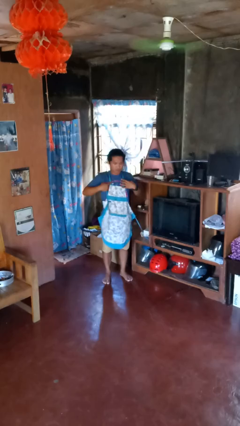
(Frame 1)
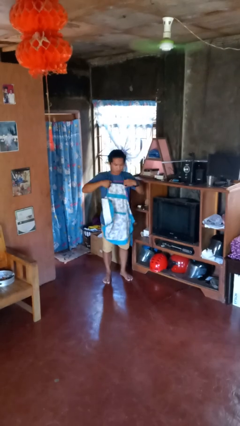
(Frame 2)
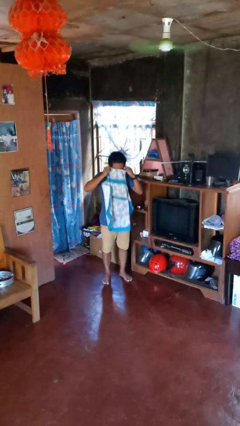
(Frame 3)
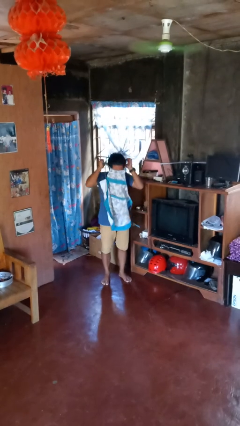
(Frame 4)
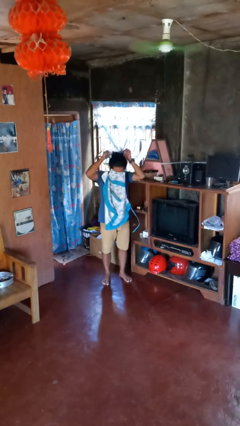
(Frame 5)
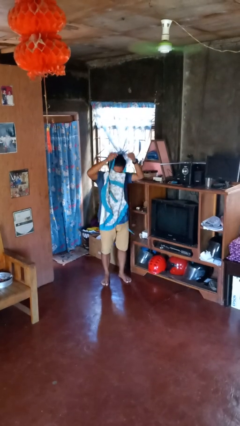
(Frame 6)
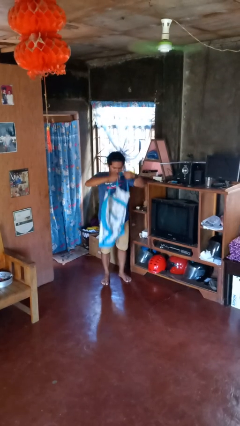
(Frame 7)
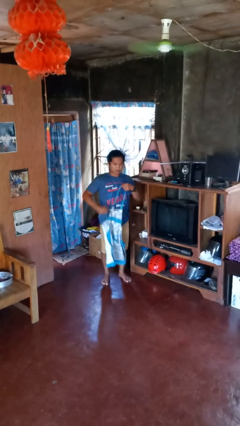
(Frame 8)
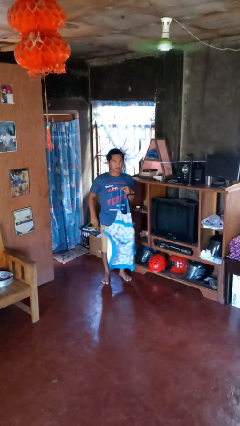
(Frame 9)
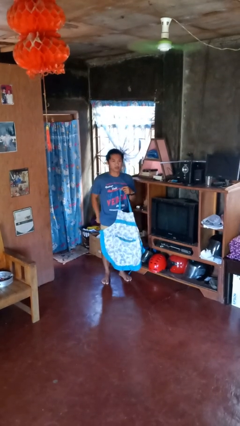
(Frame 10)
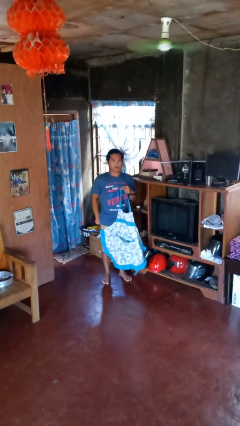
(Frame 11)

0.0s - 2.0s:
person takes off apron

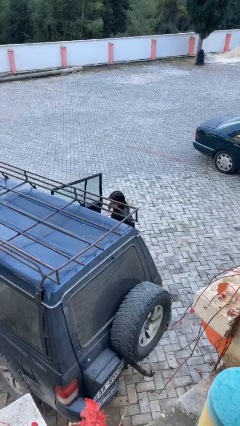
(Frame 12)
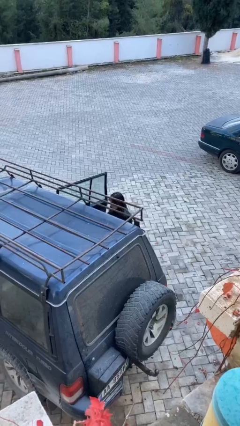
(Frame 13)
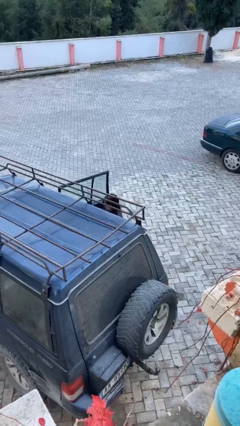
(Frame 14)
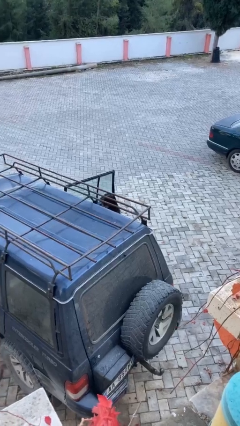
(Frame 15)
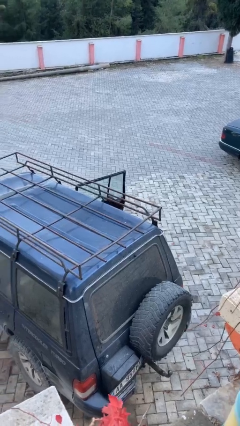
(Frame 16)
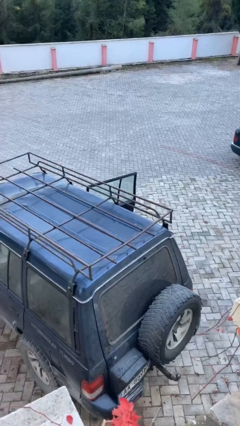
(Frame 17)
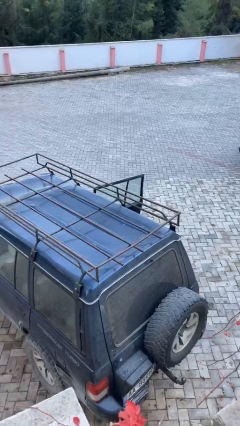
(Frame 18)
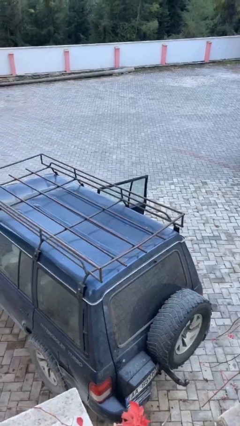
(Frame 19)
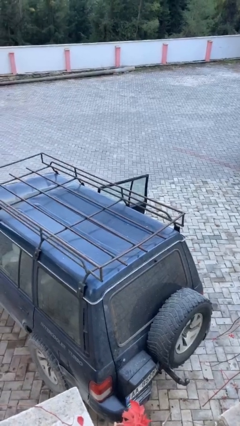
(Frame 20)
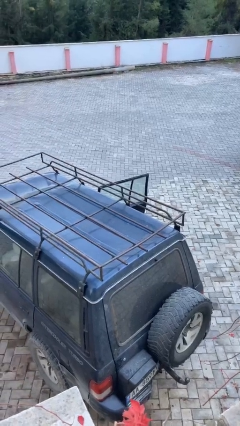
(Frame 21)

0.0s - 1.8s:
person enters car

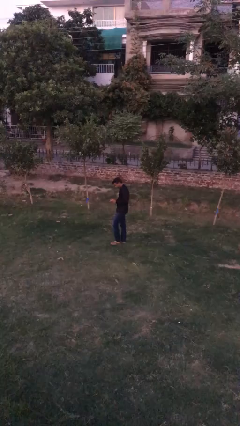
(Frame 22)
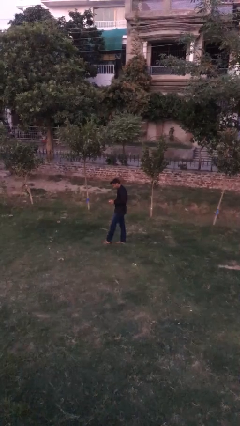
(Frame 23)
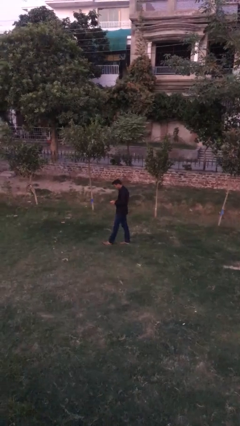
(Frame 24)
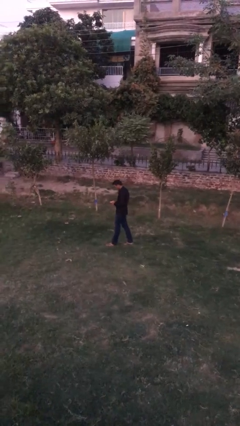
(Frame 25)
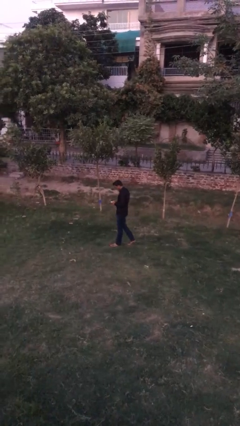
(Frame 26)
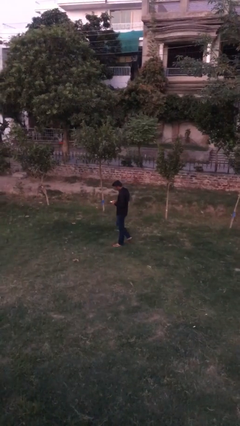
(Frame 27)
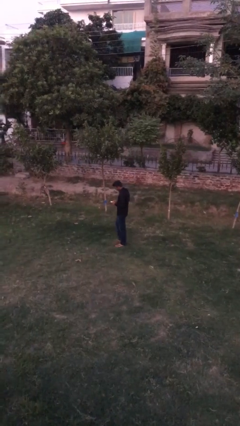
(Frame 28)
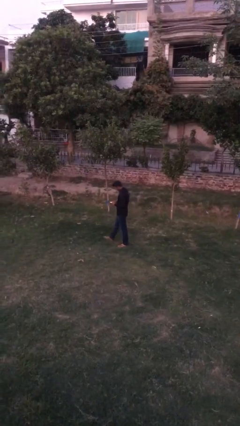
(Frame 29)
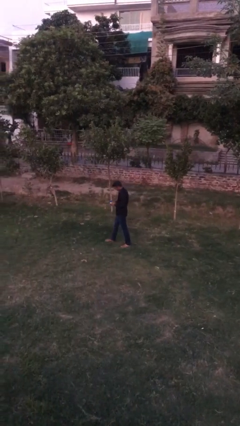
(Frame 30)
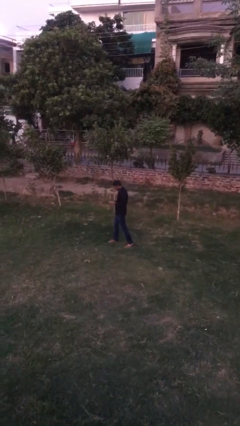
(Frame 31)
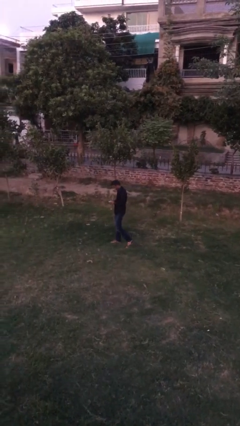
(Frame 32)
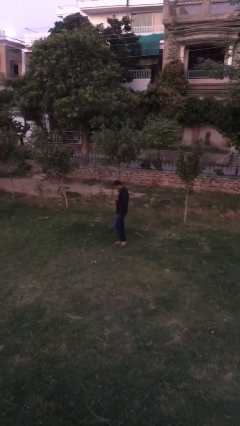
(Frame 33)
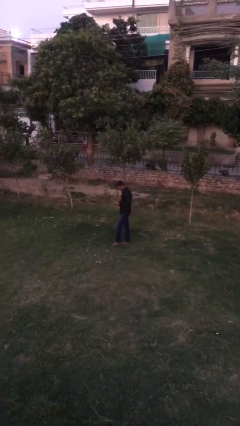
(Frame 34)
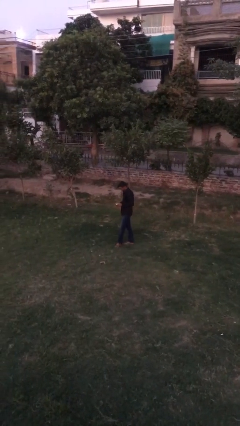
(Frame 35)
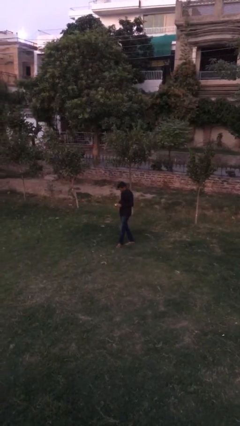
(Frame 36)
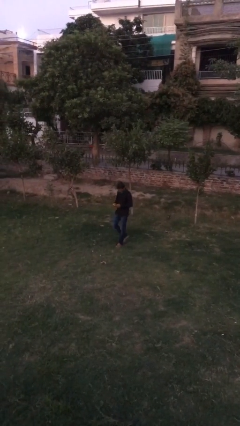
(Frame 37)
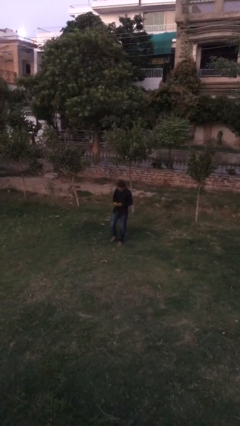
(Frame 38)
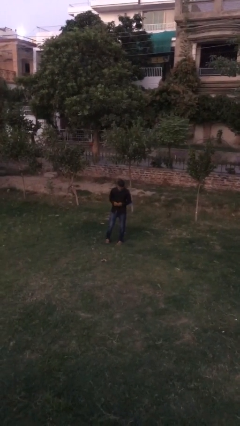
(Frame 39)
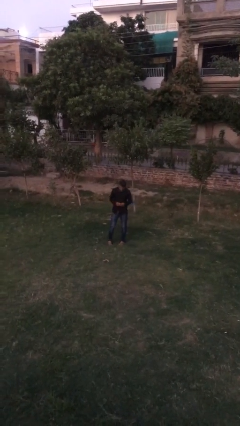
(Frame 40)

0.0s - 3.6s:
person texts on phone

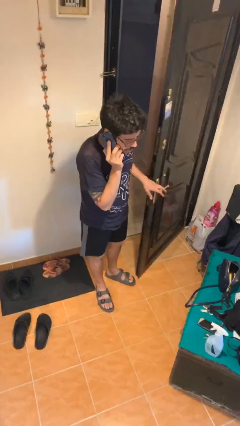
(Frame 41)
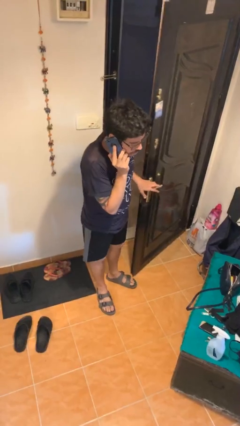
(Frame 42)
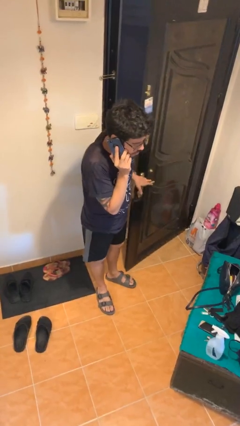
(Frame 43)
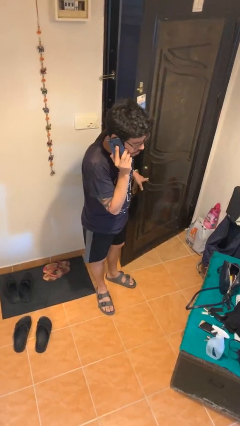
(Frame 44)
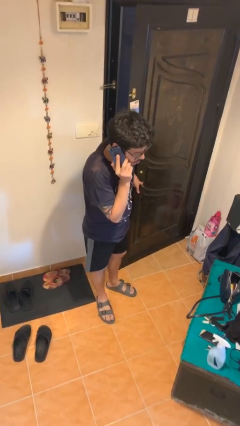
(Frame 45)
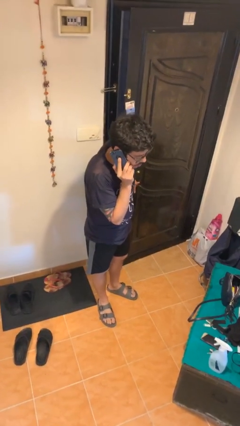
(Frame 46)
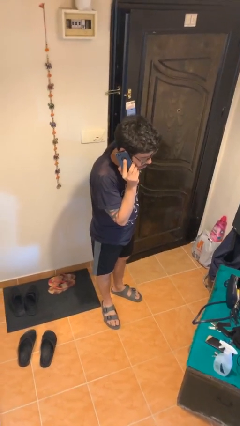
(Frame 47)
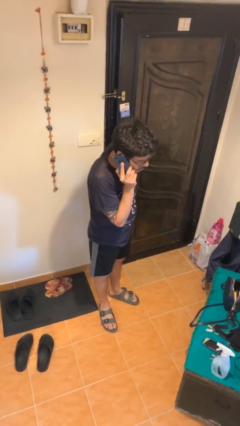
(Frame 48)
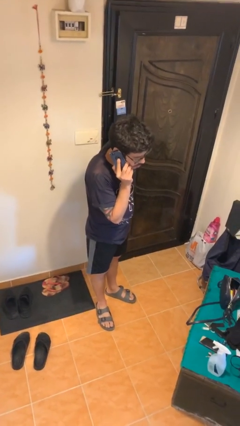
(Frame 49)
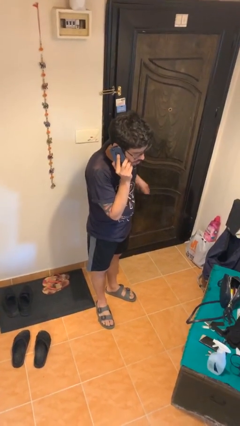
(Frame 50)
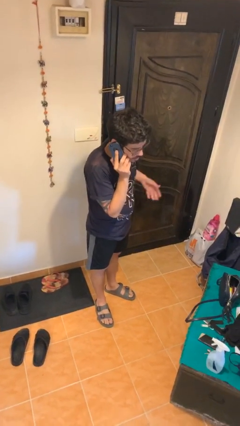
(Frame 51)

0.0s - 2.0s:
person closes facility door

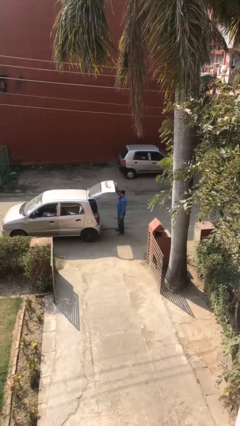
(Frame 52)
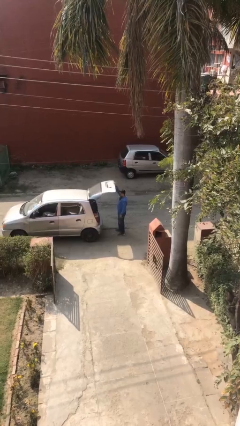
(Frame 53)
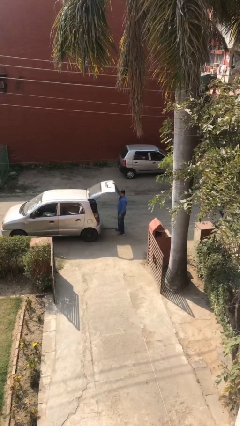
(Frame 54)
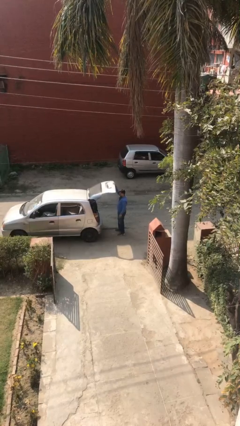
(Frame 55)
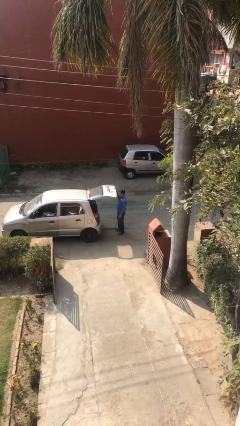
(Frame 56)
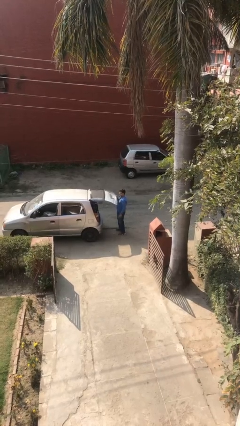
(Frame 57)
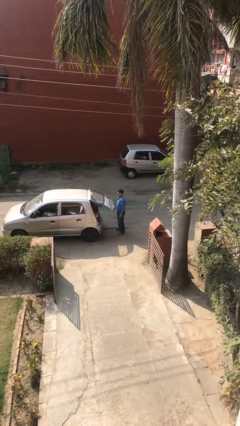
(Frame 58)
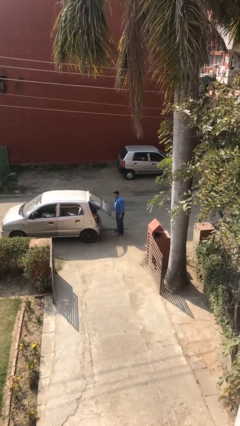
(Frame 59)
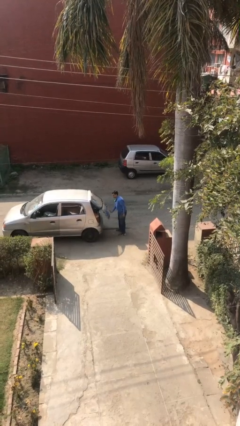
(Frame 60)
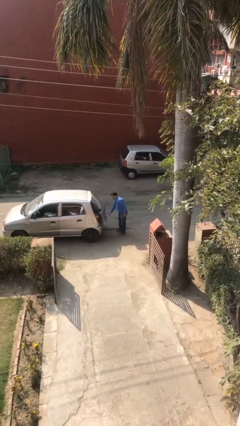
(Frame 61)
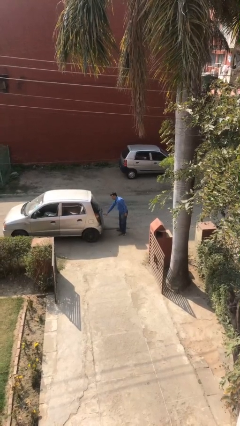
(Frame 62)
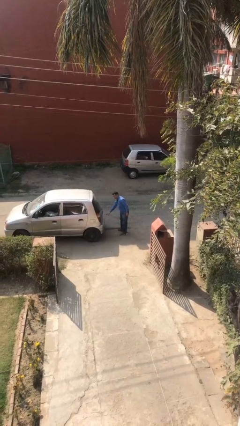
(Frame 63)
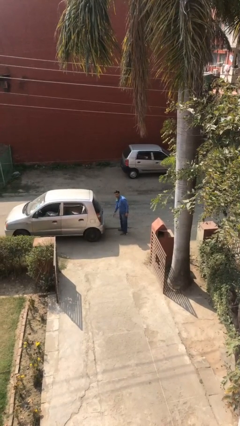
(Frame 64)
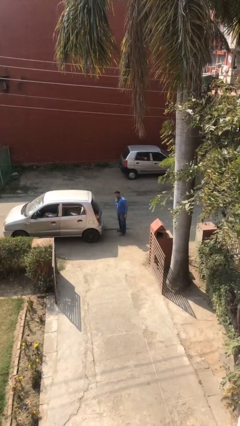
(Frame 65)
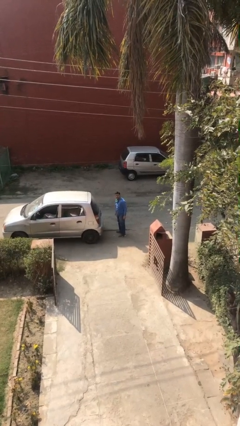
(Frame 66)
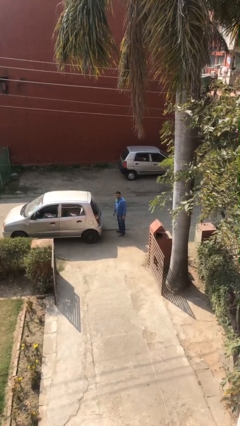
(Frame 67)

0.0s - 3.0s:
person closes car trunk

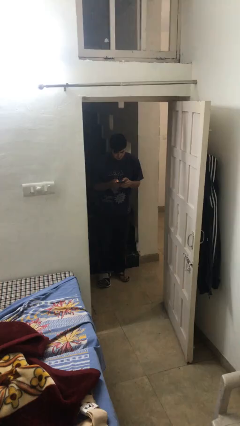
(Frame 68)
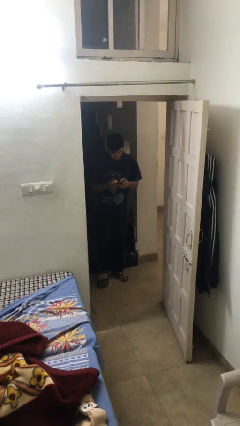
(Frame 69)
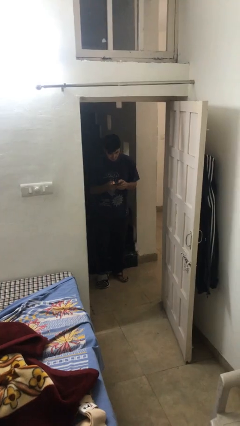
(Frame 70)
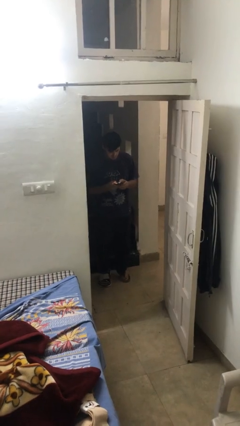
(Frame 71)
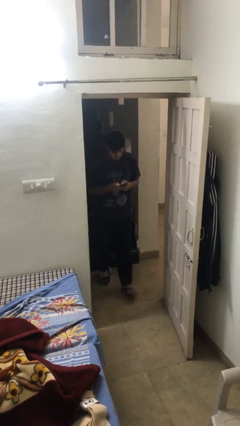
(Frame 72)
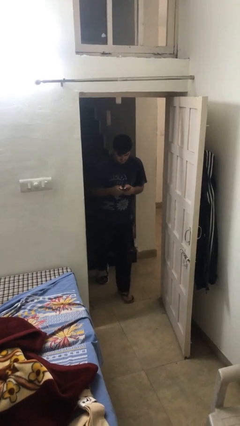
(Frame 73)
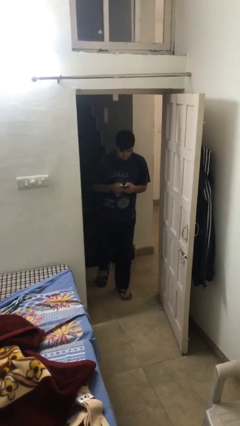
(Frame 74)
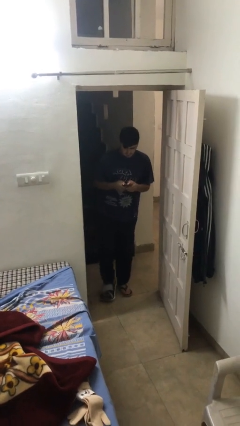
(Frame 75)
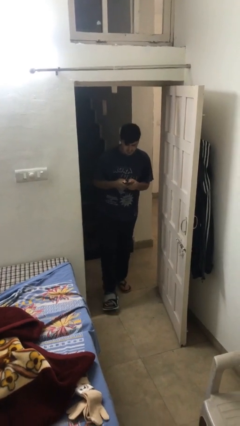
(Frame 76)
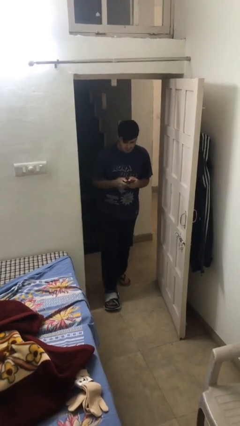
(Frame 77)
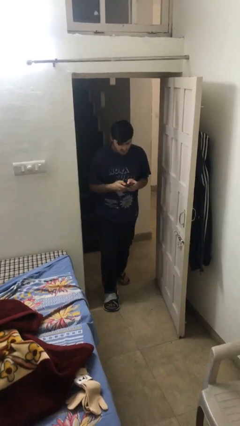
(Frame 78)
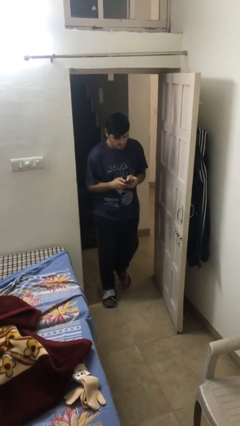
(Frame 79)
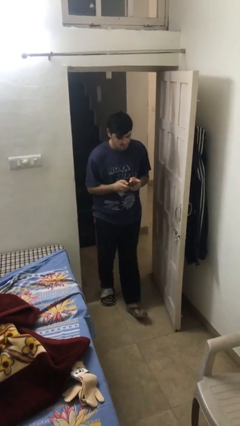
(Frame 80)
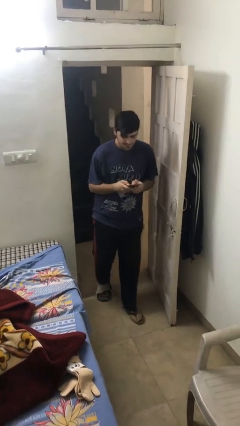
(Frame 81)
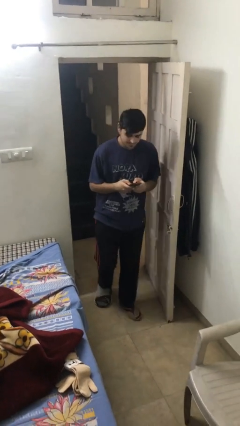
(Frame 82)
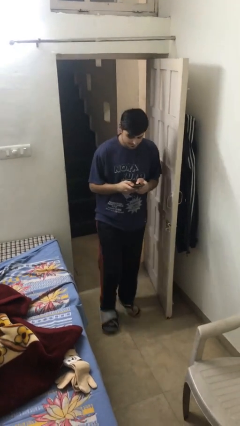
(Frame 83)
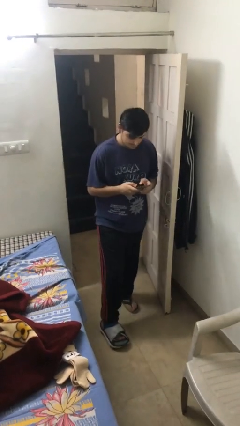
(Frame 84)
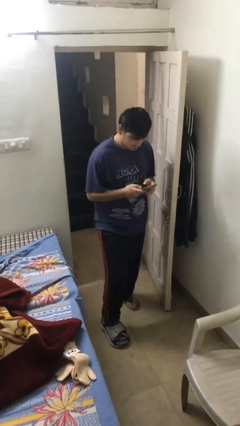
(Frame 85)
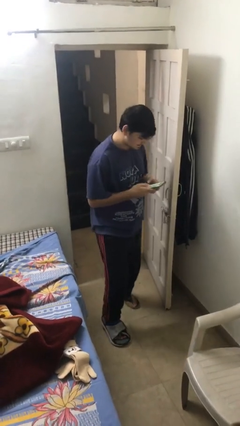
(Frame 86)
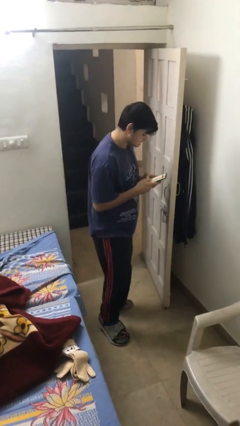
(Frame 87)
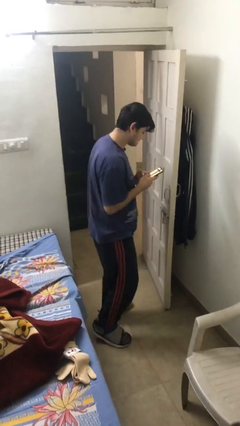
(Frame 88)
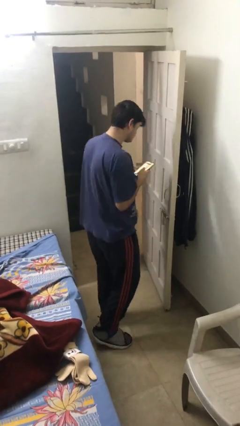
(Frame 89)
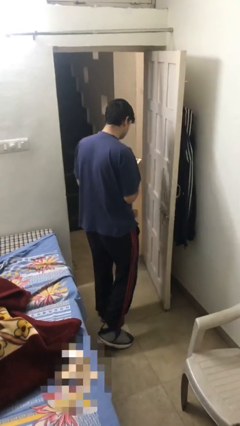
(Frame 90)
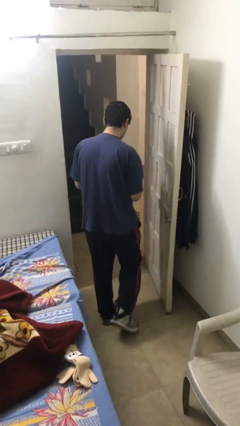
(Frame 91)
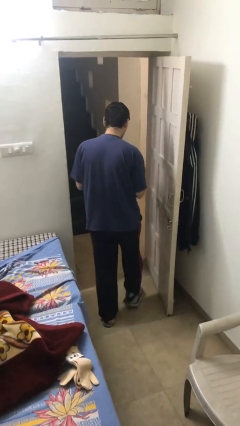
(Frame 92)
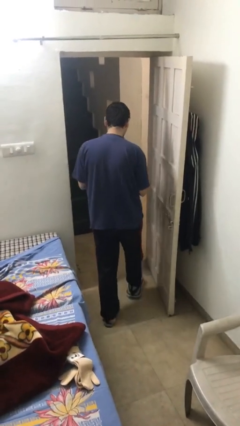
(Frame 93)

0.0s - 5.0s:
person enters scene through structure

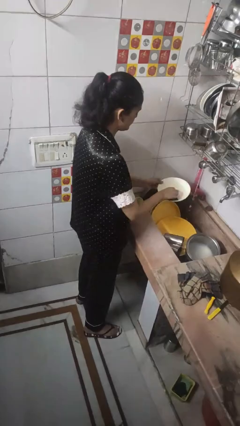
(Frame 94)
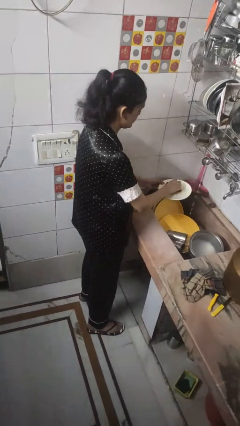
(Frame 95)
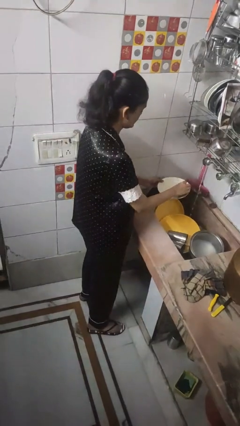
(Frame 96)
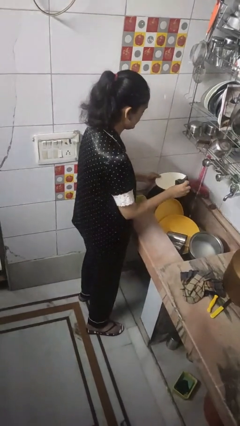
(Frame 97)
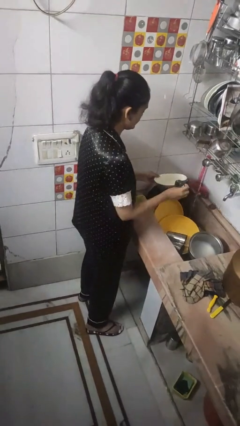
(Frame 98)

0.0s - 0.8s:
person washes dish
